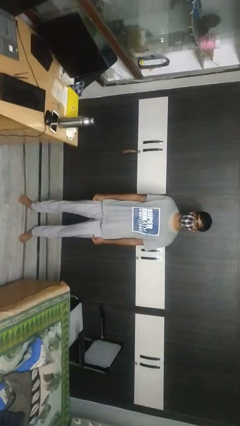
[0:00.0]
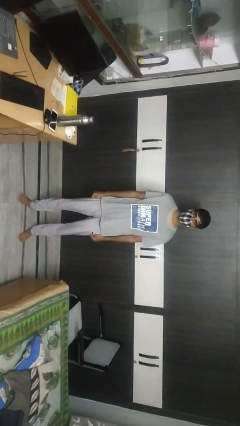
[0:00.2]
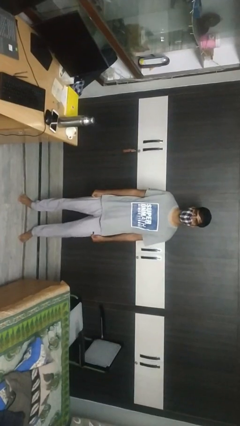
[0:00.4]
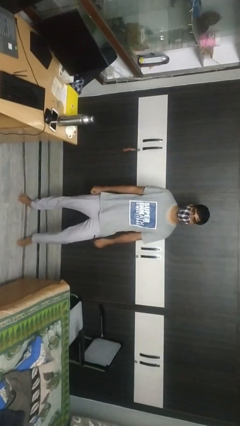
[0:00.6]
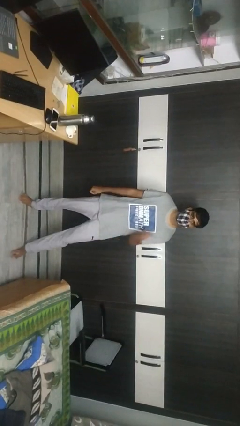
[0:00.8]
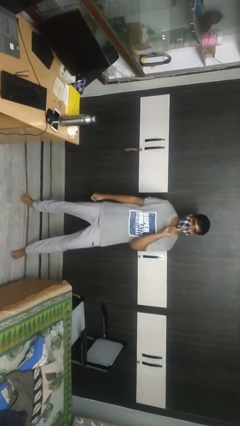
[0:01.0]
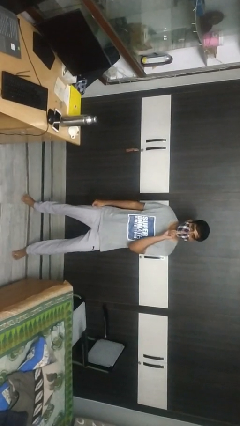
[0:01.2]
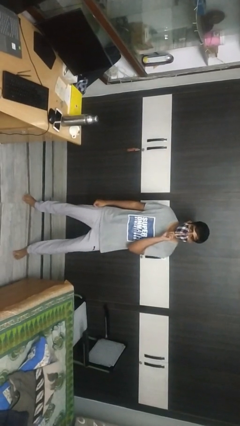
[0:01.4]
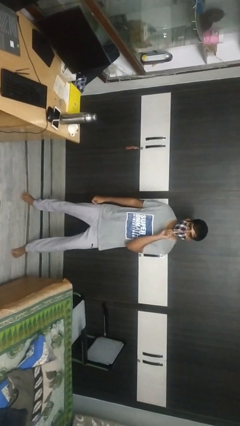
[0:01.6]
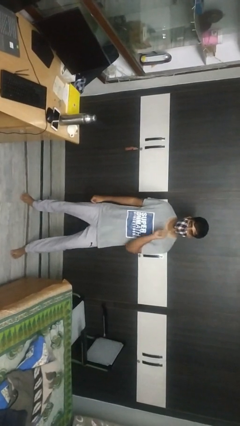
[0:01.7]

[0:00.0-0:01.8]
person gestures be quiet

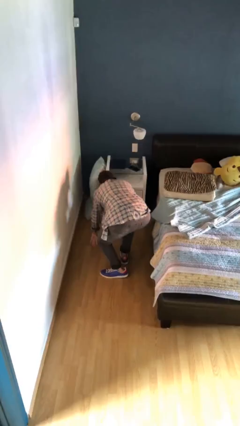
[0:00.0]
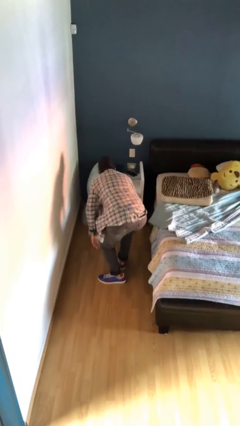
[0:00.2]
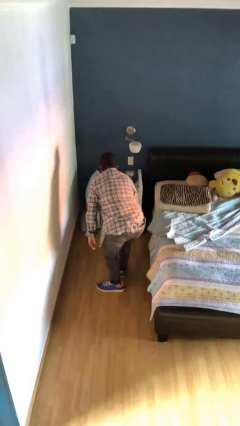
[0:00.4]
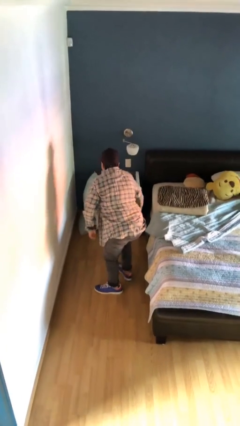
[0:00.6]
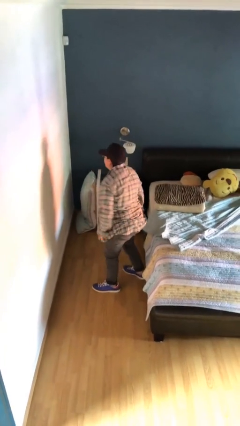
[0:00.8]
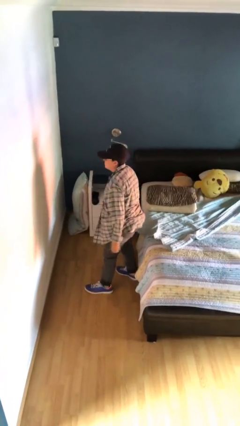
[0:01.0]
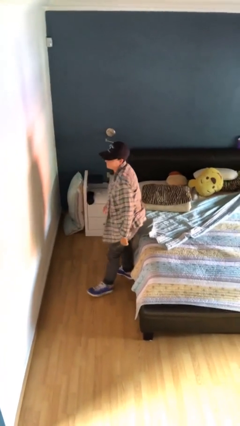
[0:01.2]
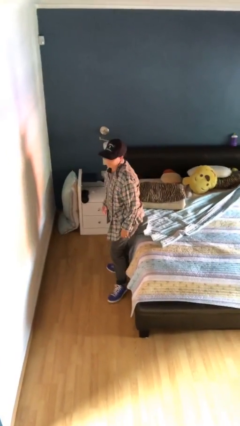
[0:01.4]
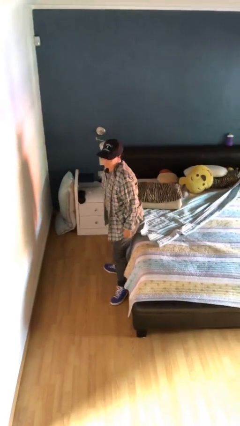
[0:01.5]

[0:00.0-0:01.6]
person stands up from floor

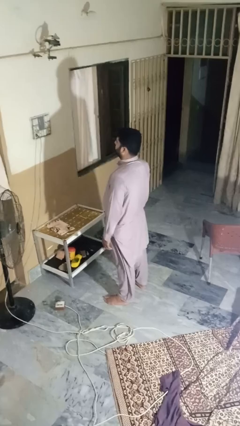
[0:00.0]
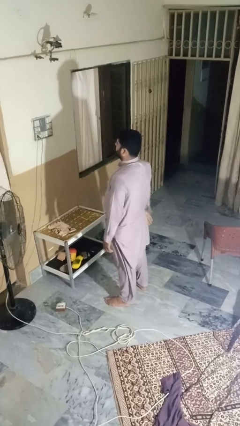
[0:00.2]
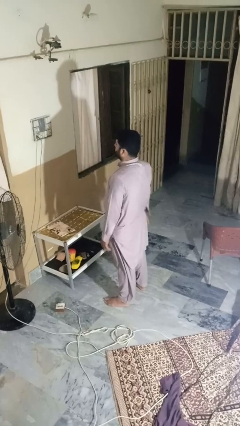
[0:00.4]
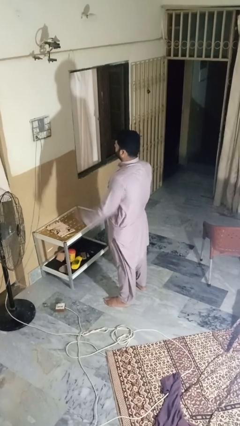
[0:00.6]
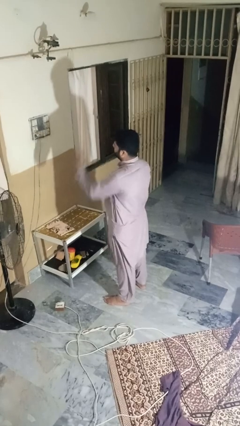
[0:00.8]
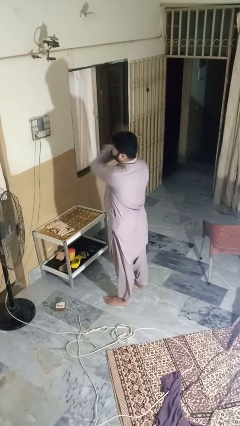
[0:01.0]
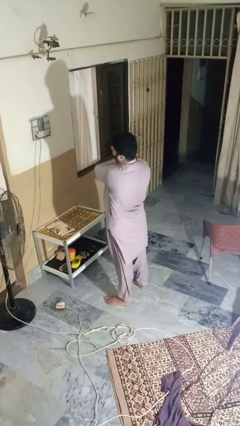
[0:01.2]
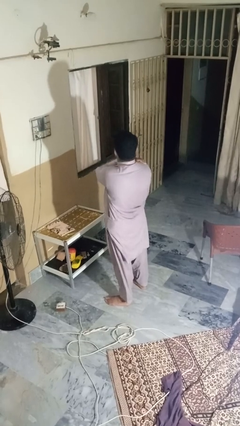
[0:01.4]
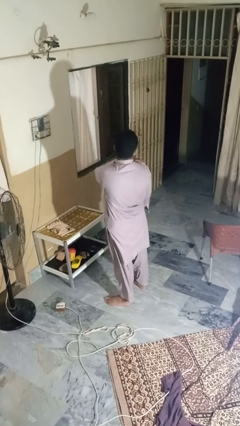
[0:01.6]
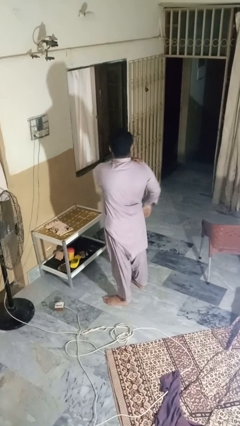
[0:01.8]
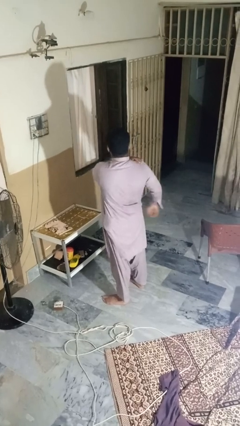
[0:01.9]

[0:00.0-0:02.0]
person shrugs

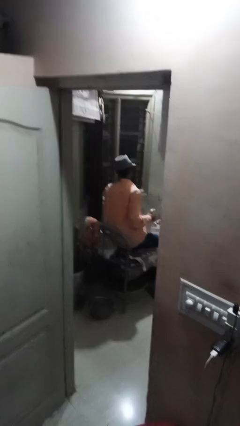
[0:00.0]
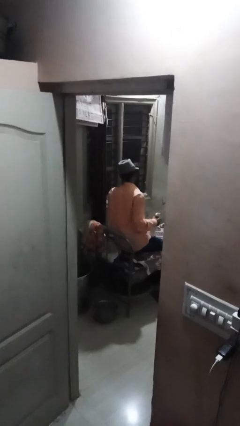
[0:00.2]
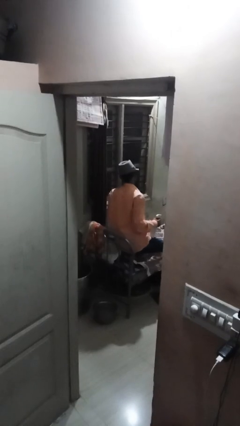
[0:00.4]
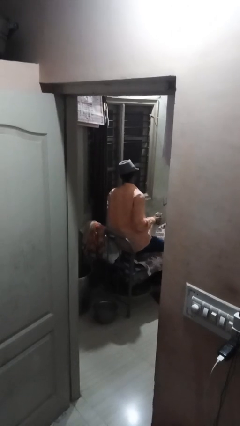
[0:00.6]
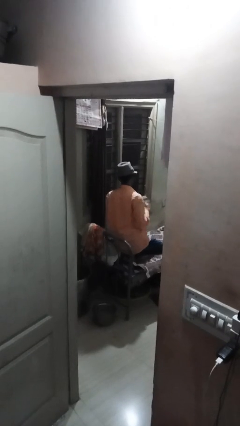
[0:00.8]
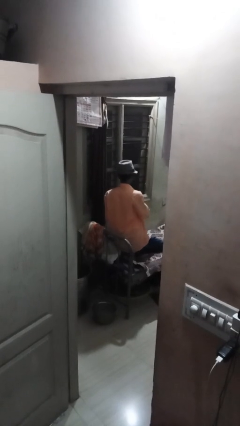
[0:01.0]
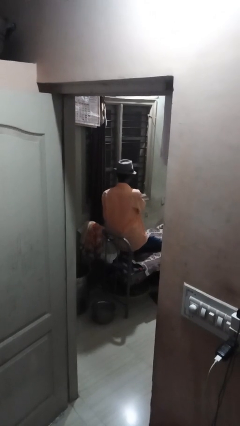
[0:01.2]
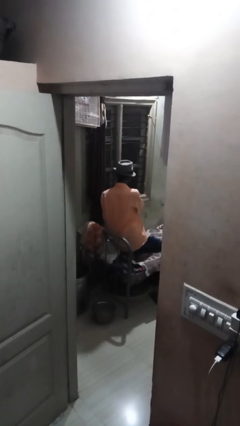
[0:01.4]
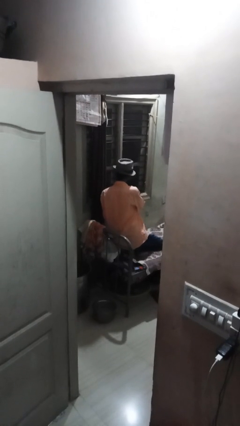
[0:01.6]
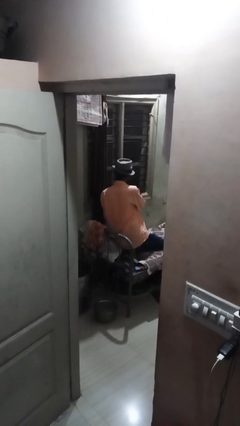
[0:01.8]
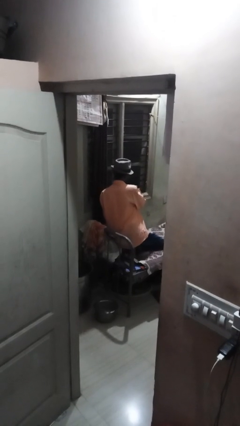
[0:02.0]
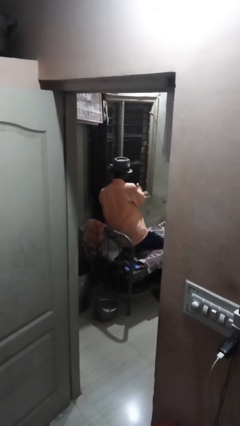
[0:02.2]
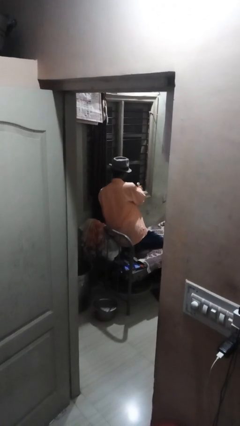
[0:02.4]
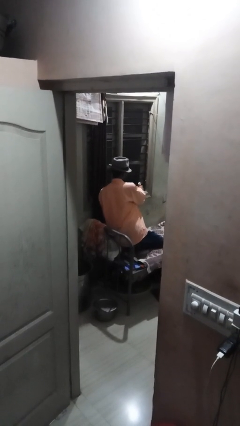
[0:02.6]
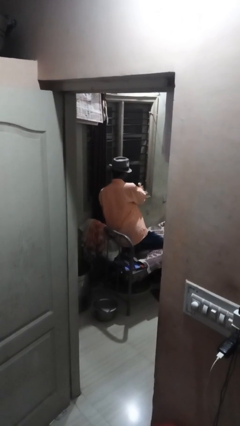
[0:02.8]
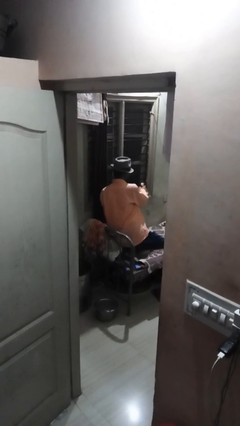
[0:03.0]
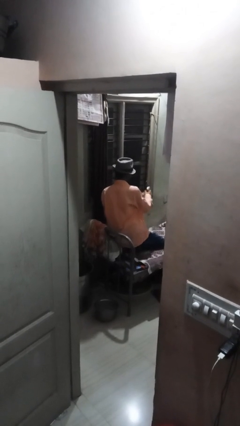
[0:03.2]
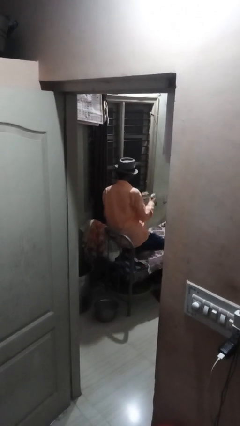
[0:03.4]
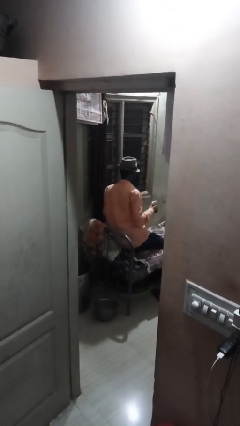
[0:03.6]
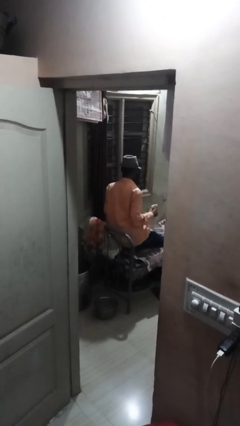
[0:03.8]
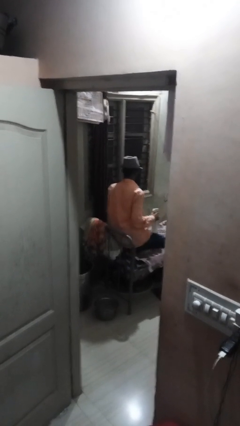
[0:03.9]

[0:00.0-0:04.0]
person sprays from bottle

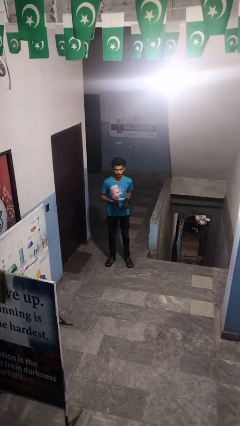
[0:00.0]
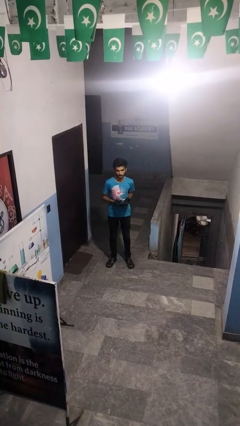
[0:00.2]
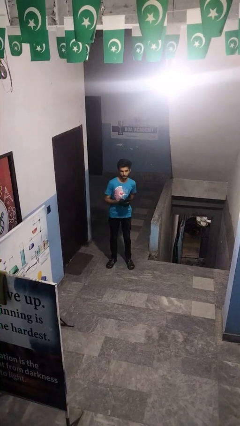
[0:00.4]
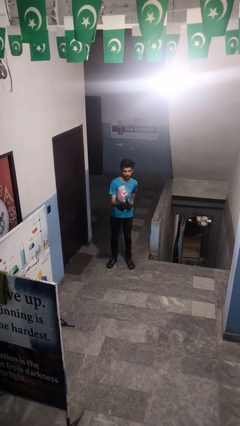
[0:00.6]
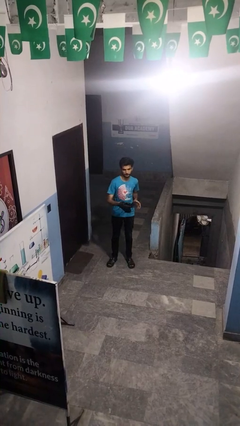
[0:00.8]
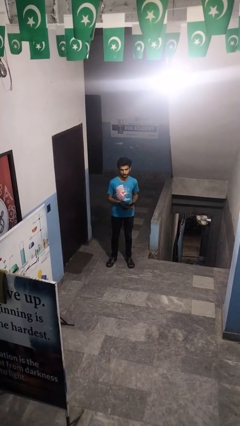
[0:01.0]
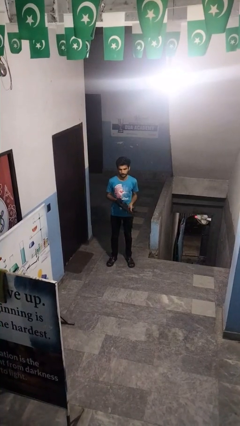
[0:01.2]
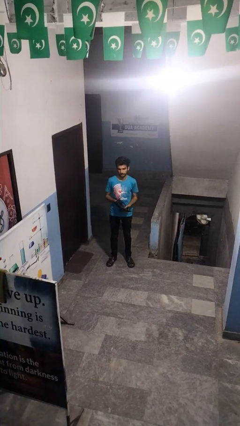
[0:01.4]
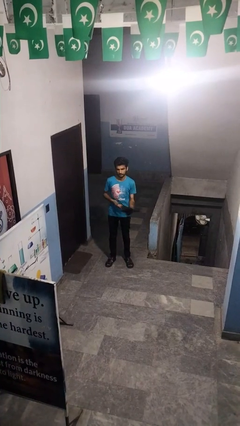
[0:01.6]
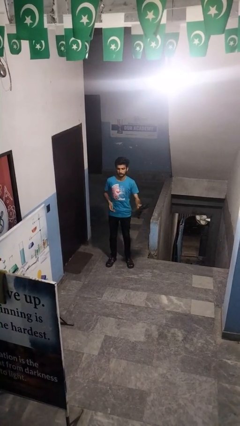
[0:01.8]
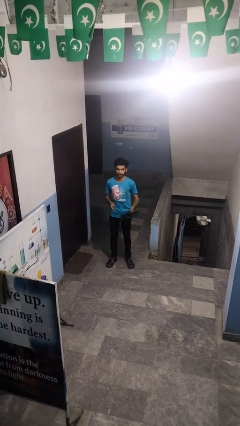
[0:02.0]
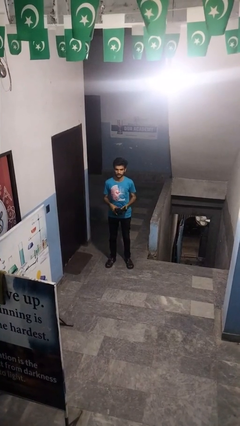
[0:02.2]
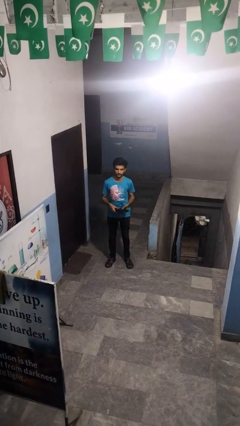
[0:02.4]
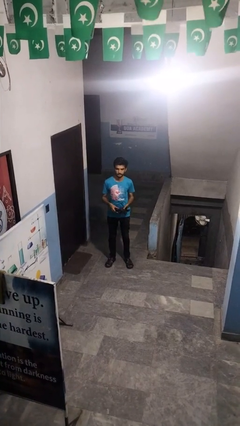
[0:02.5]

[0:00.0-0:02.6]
person takes off gloves

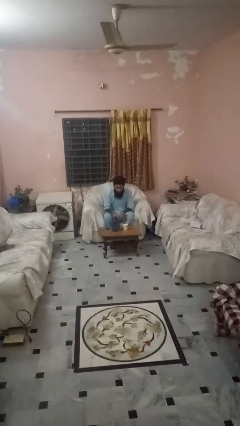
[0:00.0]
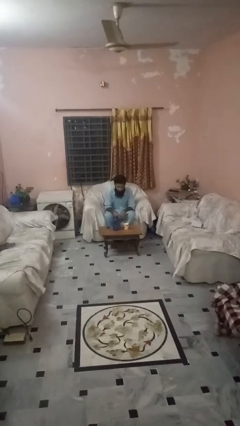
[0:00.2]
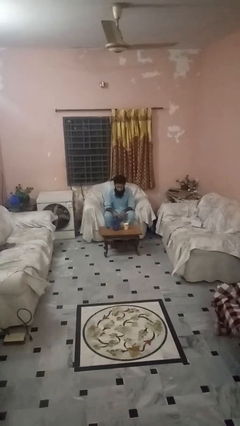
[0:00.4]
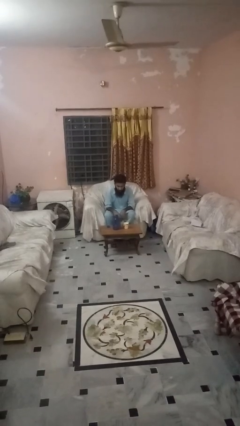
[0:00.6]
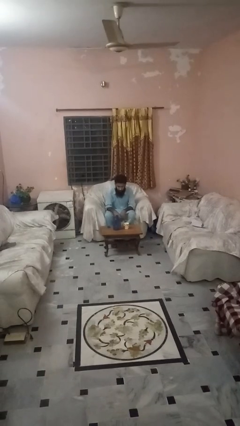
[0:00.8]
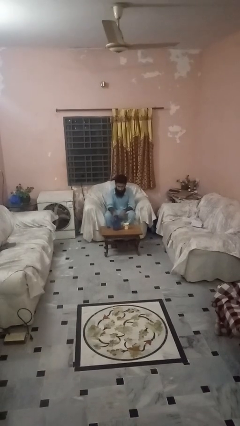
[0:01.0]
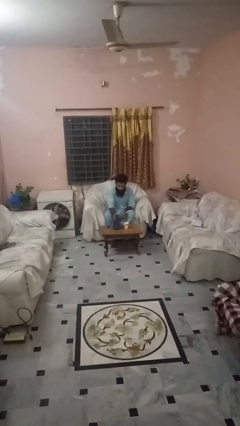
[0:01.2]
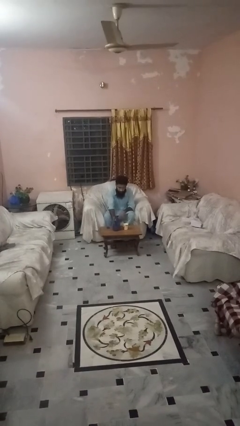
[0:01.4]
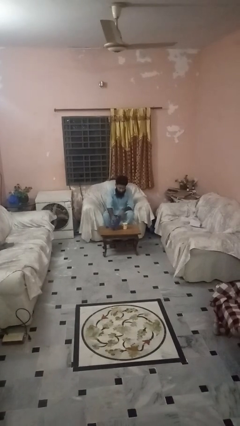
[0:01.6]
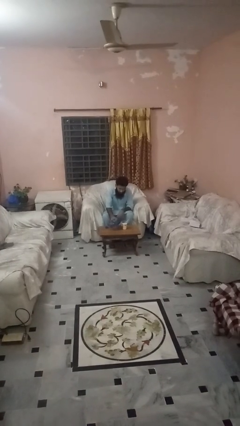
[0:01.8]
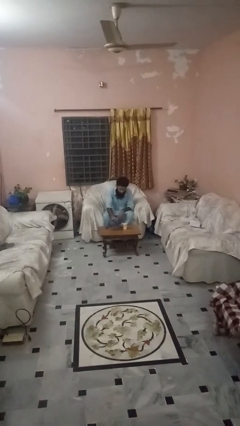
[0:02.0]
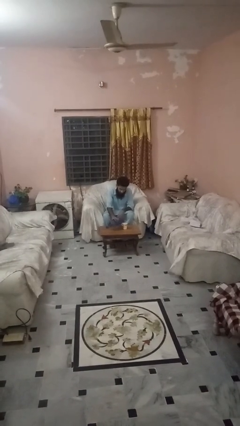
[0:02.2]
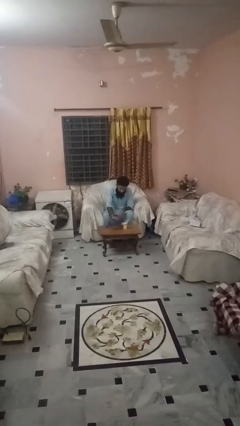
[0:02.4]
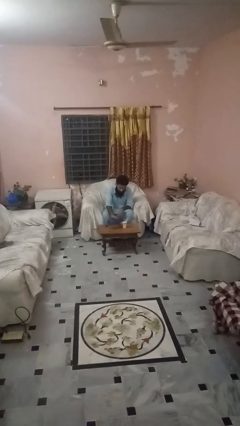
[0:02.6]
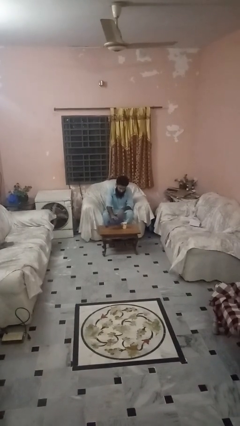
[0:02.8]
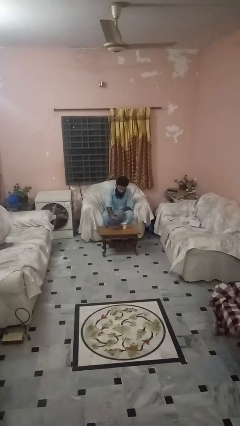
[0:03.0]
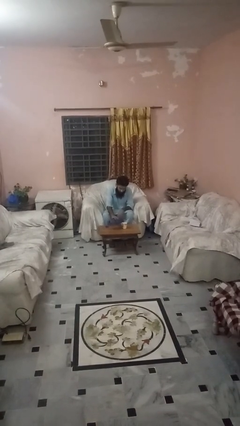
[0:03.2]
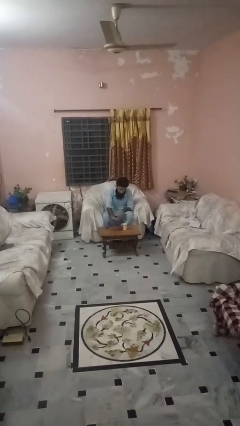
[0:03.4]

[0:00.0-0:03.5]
person pours liquid into cup

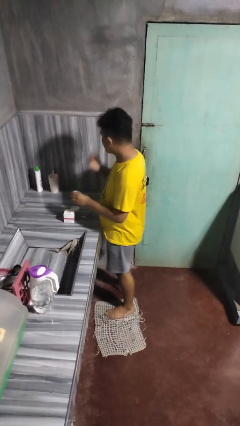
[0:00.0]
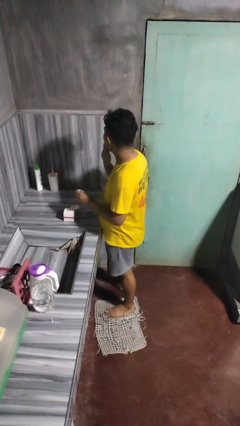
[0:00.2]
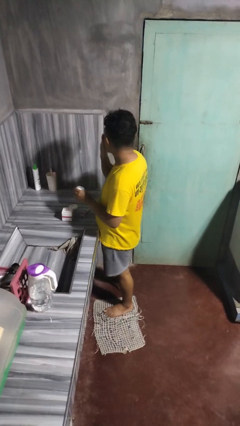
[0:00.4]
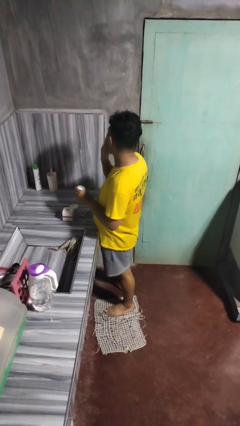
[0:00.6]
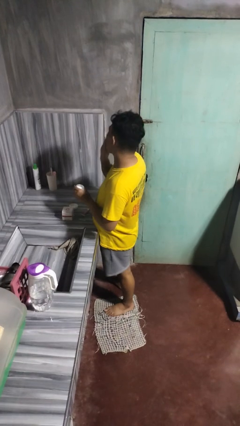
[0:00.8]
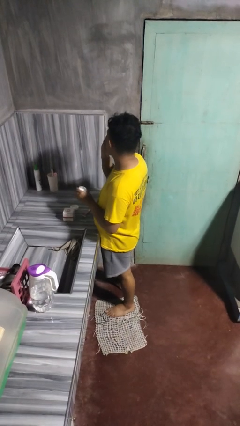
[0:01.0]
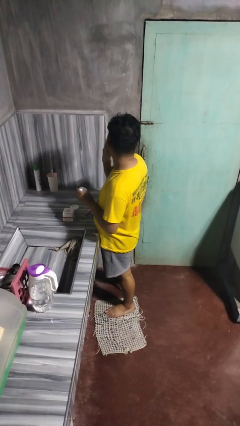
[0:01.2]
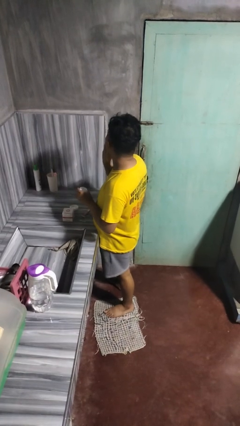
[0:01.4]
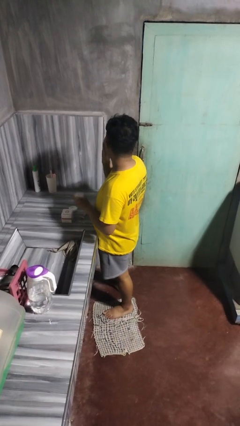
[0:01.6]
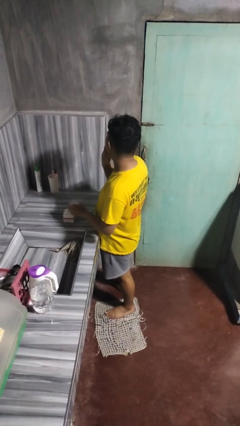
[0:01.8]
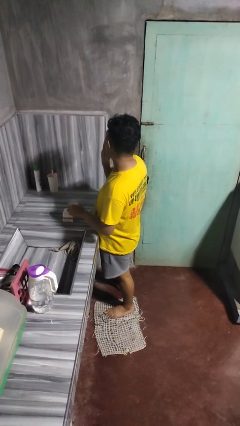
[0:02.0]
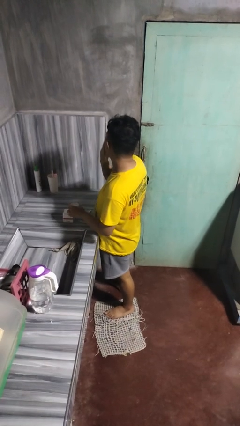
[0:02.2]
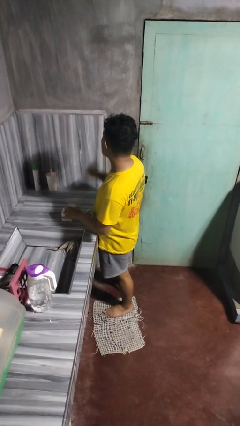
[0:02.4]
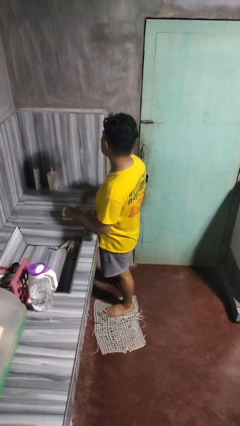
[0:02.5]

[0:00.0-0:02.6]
person applies shaving cream
